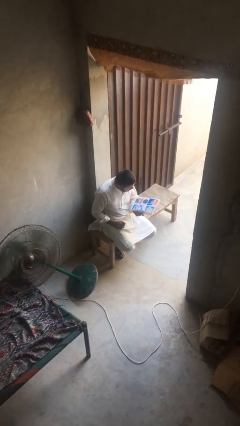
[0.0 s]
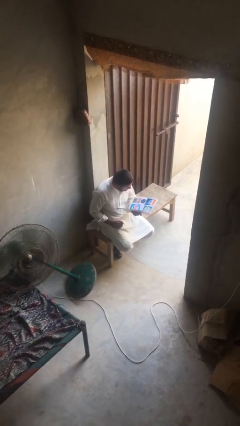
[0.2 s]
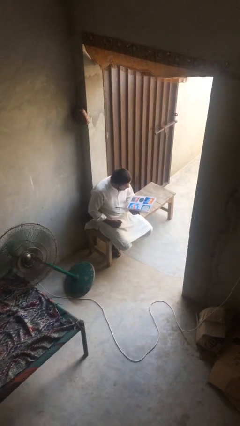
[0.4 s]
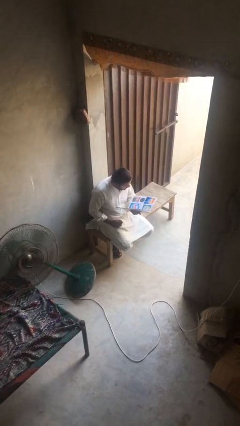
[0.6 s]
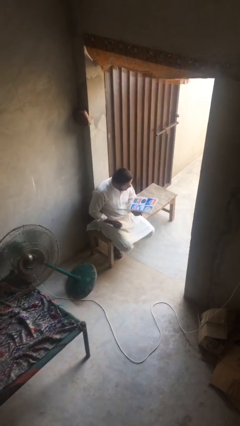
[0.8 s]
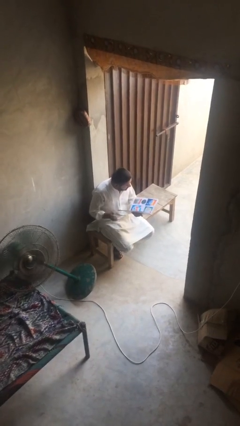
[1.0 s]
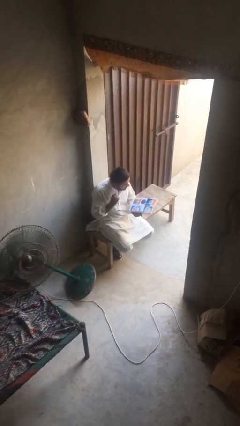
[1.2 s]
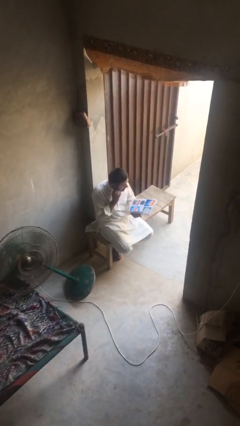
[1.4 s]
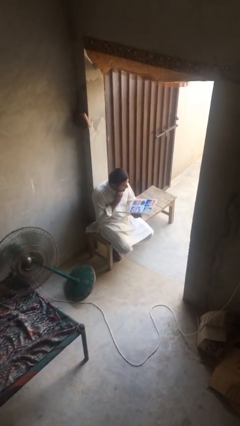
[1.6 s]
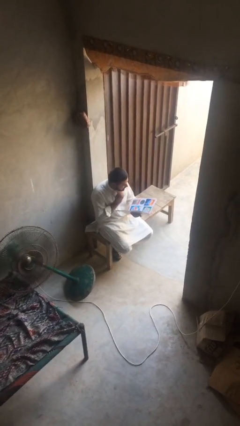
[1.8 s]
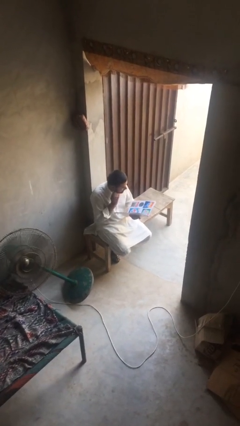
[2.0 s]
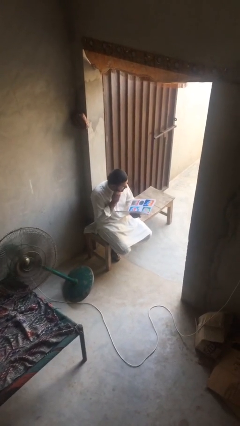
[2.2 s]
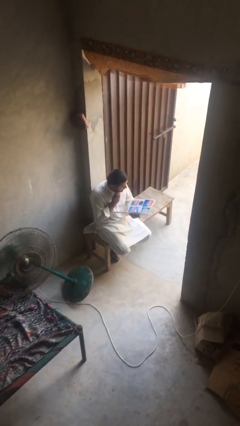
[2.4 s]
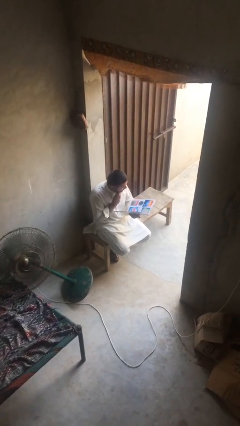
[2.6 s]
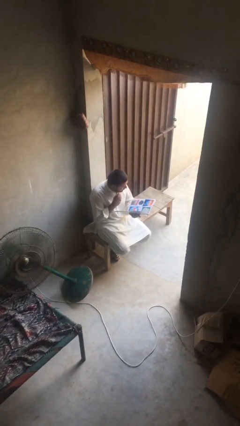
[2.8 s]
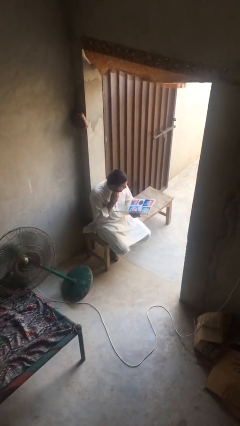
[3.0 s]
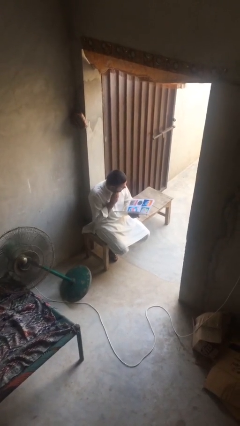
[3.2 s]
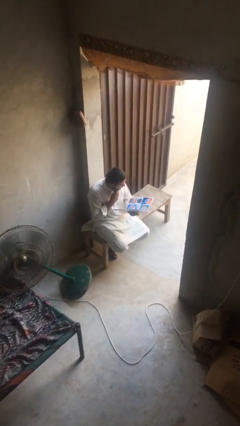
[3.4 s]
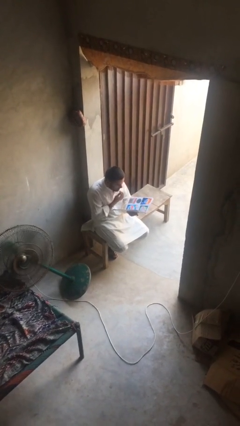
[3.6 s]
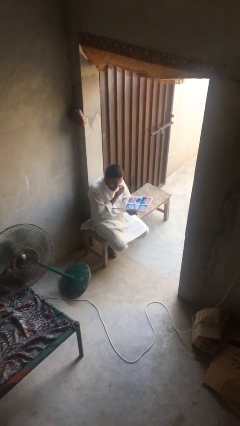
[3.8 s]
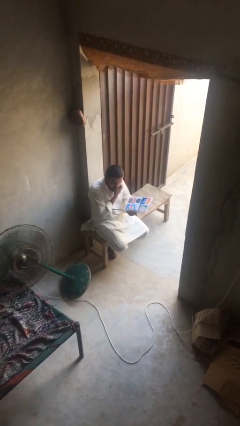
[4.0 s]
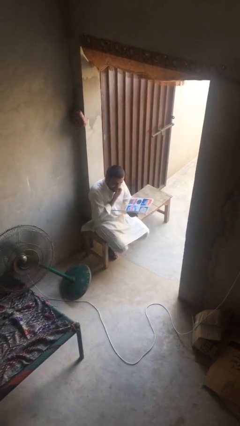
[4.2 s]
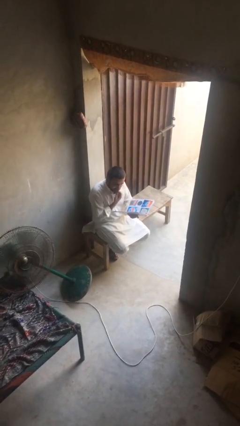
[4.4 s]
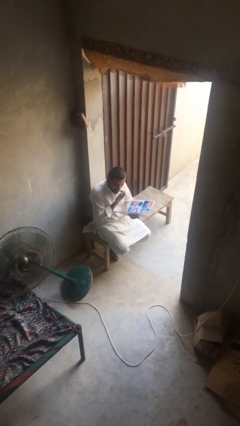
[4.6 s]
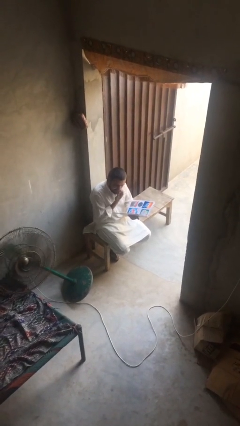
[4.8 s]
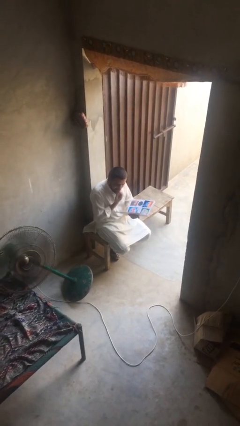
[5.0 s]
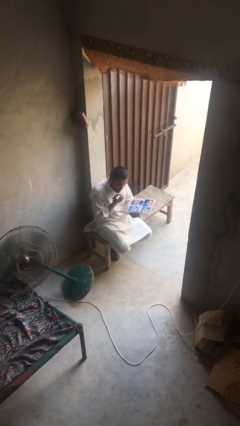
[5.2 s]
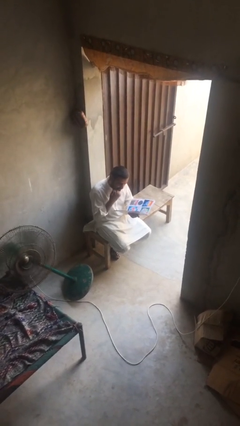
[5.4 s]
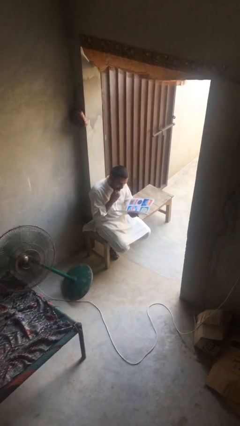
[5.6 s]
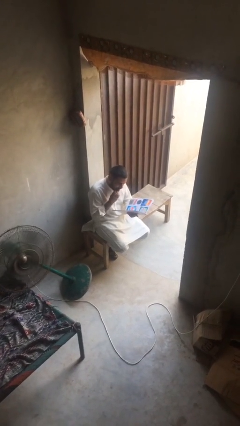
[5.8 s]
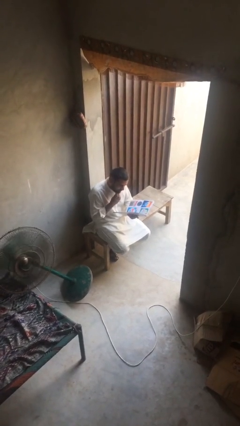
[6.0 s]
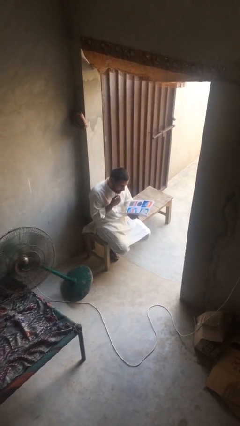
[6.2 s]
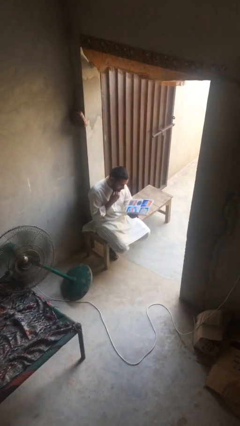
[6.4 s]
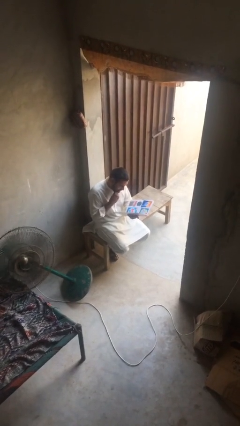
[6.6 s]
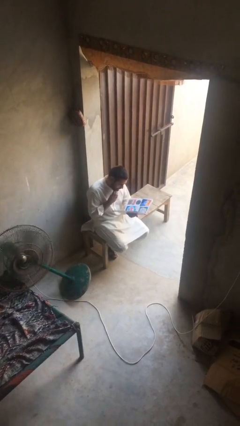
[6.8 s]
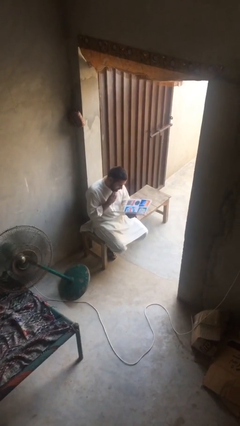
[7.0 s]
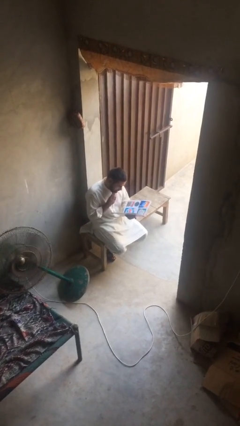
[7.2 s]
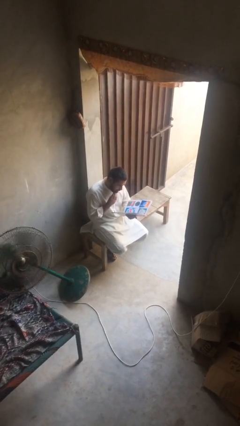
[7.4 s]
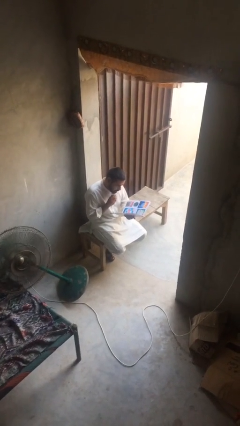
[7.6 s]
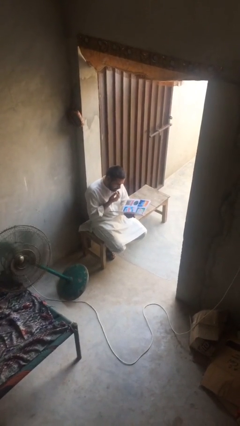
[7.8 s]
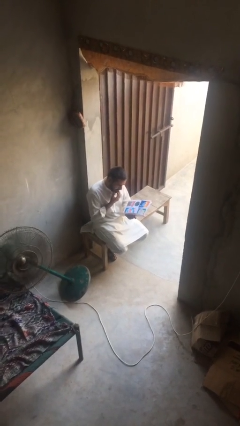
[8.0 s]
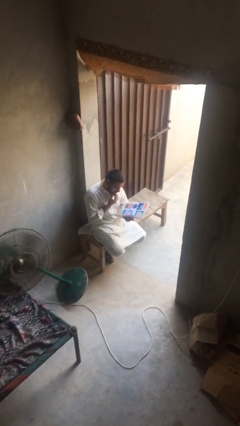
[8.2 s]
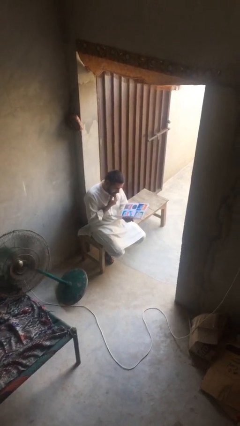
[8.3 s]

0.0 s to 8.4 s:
person reads document

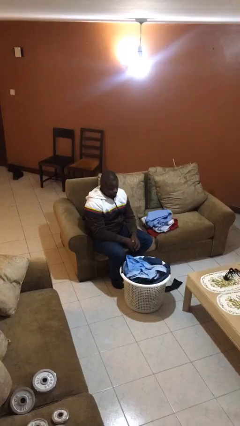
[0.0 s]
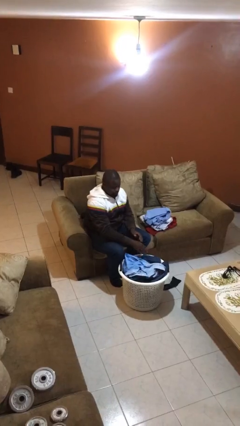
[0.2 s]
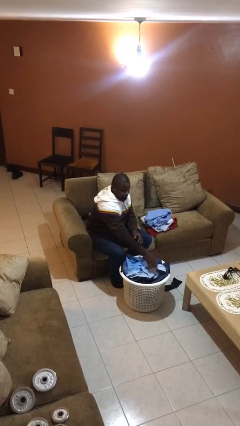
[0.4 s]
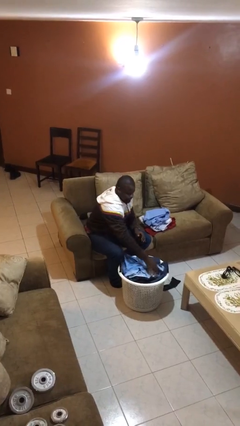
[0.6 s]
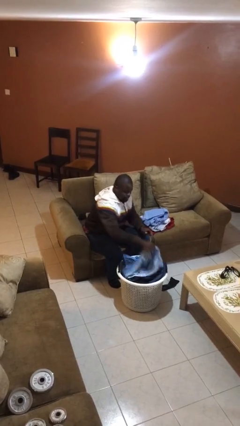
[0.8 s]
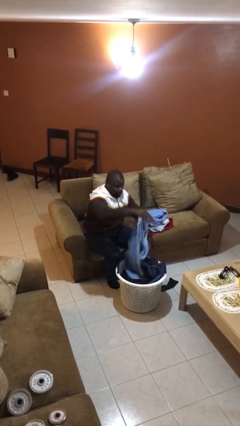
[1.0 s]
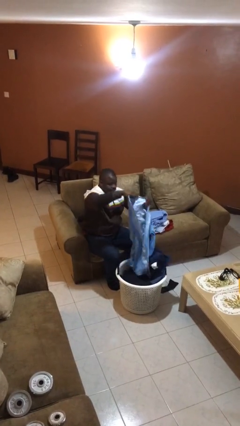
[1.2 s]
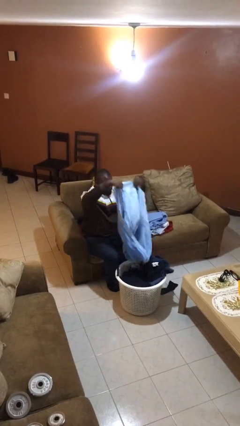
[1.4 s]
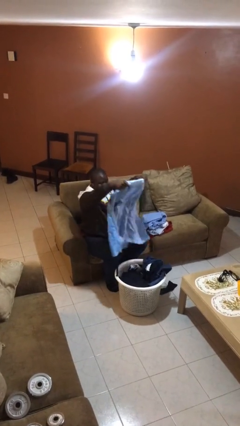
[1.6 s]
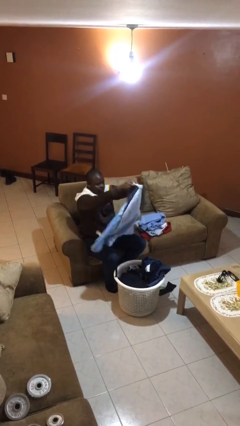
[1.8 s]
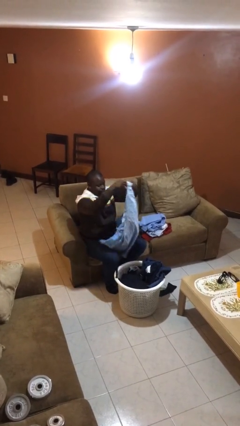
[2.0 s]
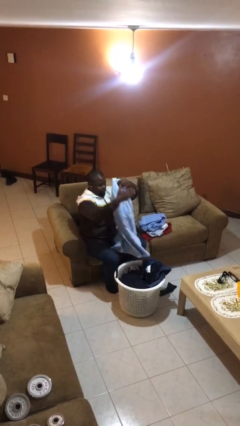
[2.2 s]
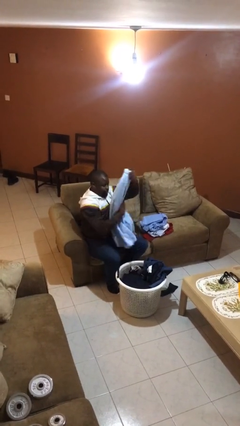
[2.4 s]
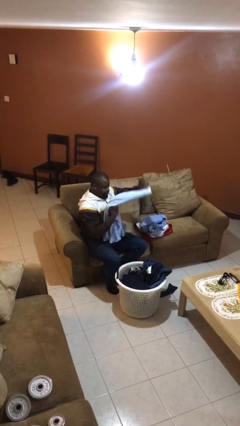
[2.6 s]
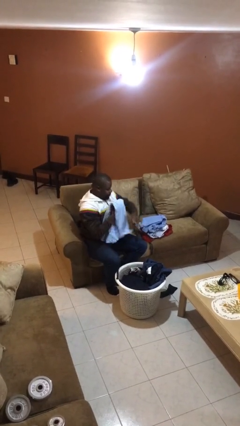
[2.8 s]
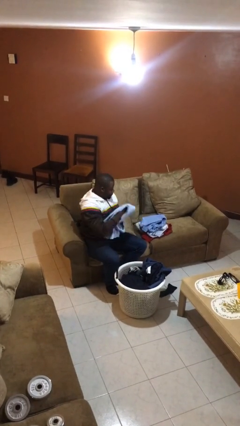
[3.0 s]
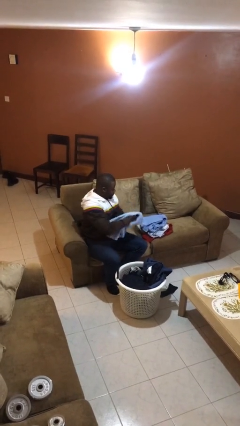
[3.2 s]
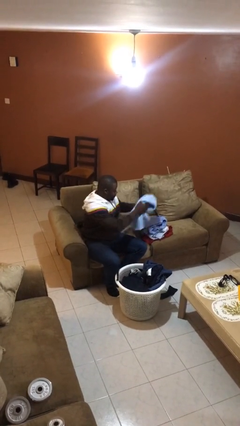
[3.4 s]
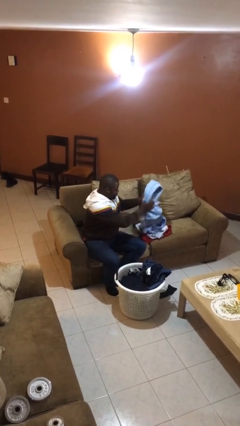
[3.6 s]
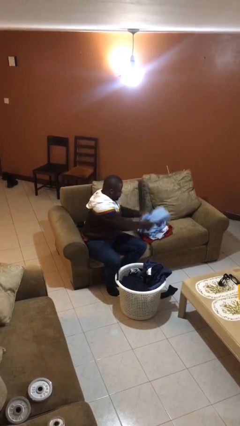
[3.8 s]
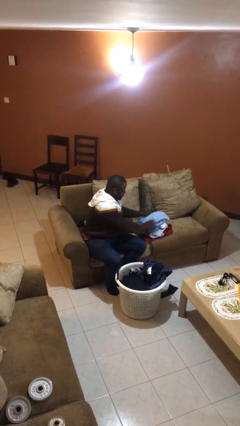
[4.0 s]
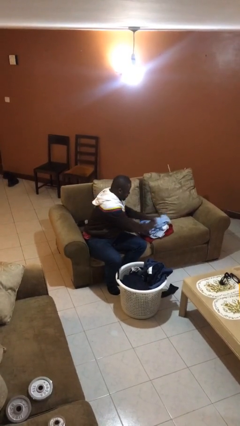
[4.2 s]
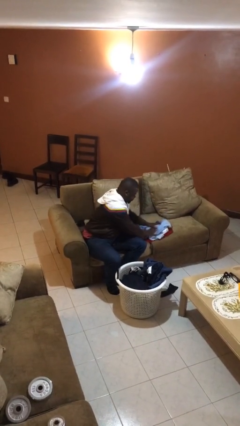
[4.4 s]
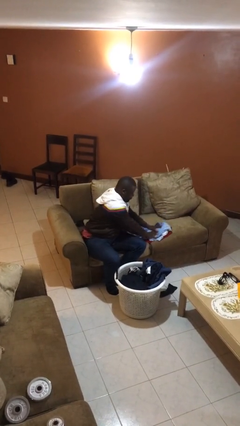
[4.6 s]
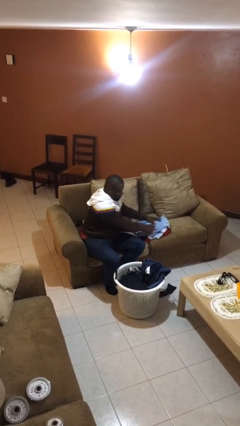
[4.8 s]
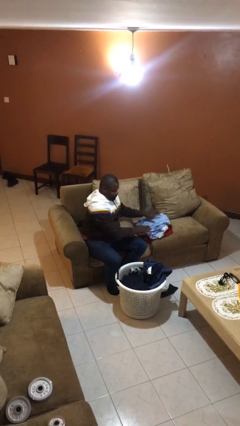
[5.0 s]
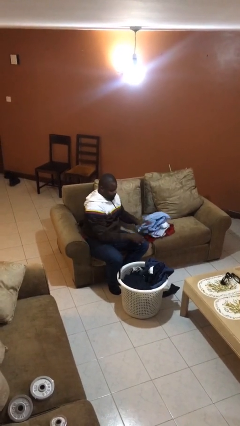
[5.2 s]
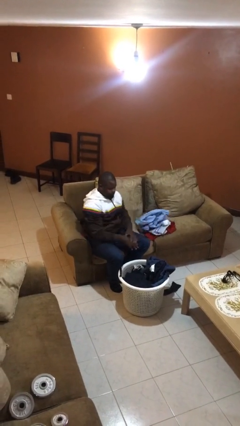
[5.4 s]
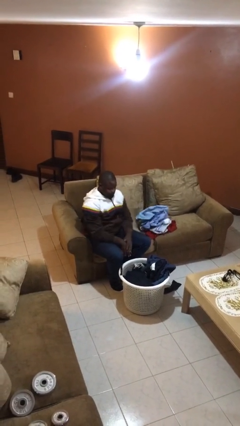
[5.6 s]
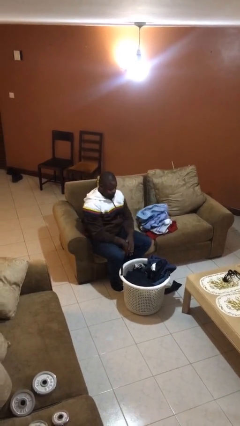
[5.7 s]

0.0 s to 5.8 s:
person folds shirt

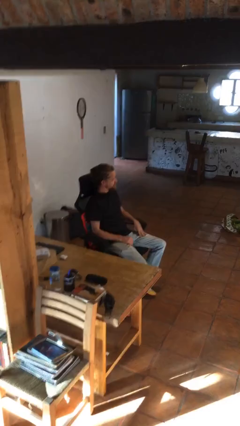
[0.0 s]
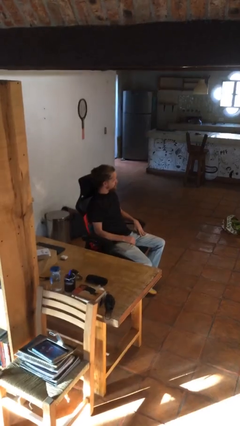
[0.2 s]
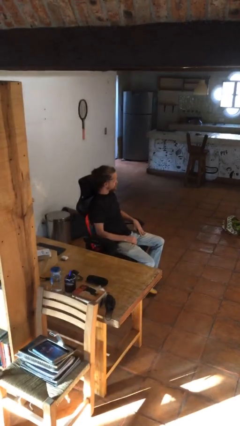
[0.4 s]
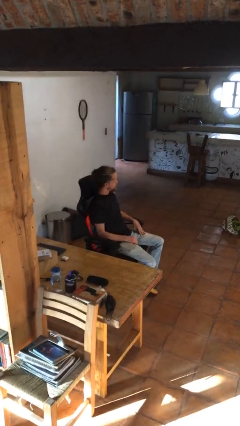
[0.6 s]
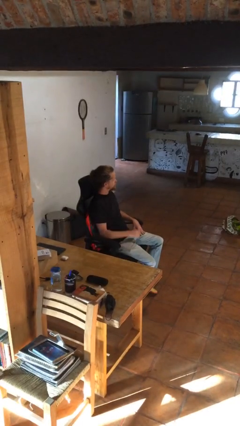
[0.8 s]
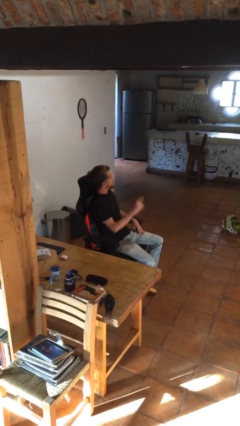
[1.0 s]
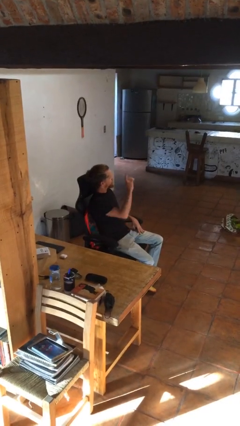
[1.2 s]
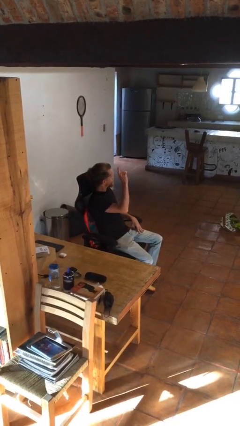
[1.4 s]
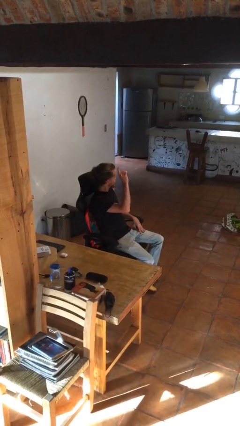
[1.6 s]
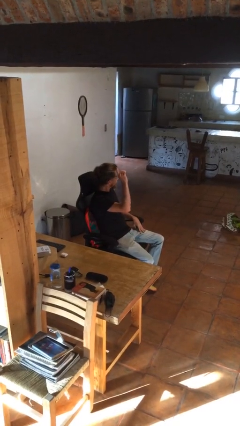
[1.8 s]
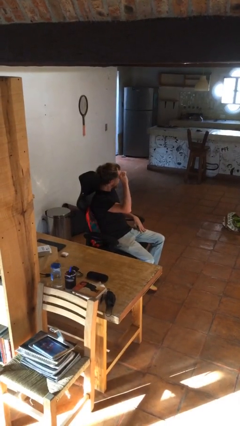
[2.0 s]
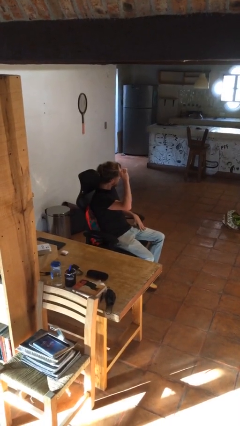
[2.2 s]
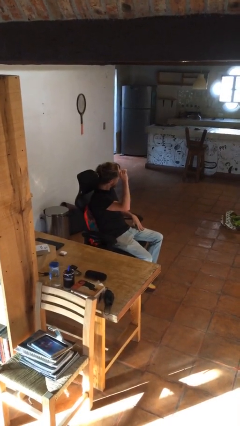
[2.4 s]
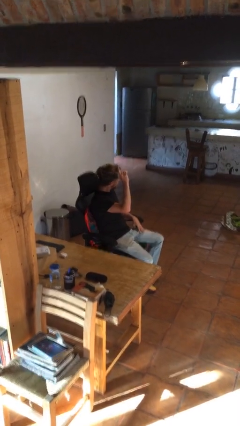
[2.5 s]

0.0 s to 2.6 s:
person gestures raise hand

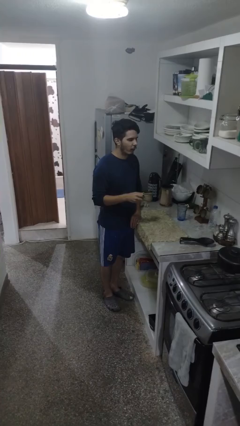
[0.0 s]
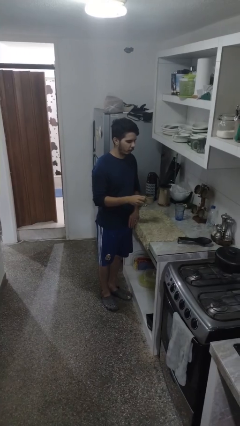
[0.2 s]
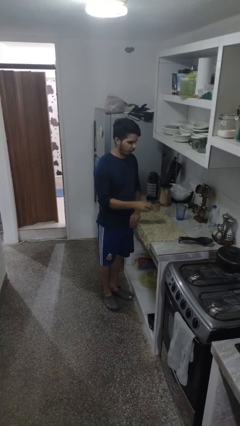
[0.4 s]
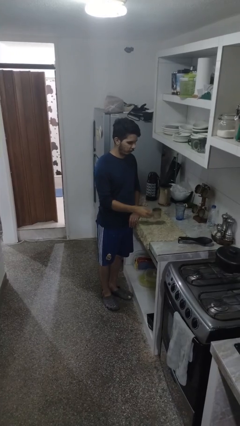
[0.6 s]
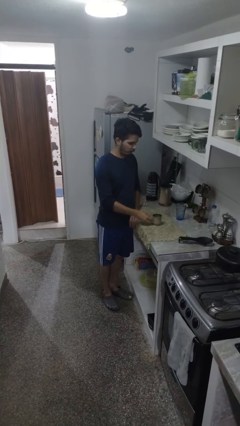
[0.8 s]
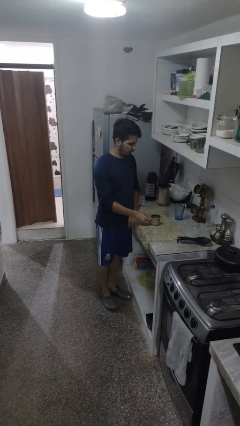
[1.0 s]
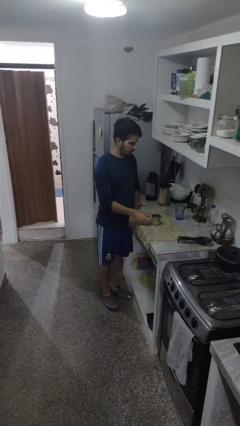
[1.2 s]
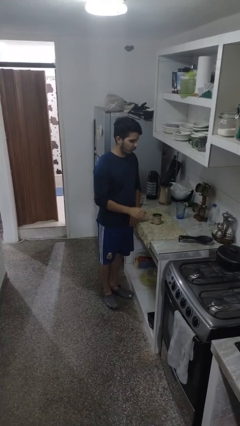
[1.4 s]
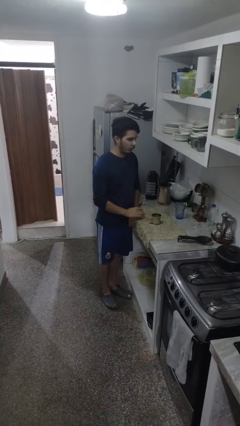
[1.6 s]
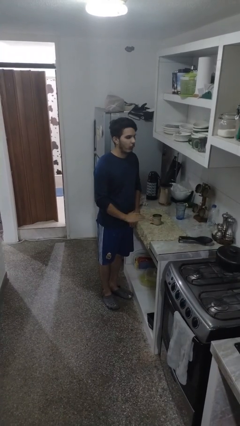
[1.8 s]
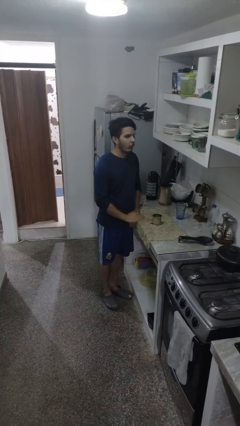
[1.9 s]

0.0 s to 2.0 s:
person puts down object on table
